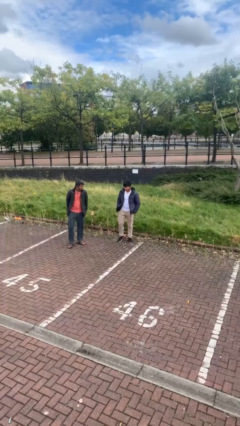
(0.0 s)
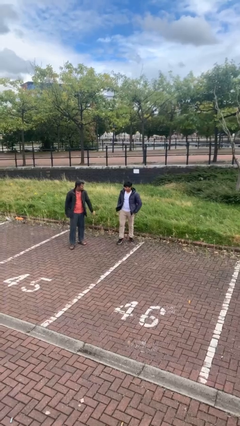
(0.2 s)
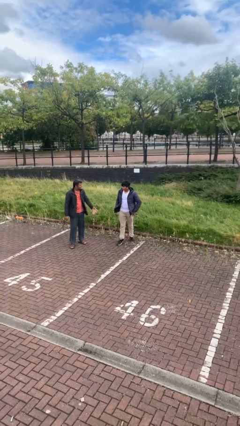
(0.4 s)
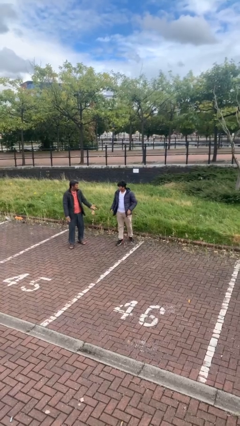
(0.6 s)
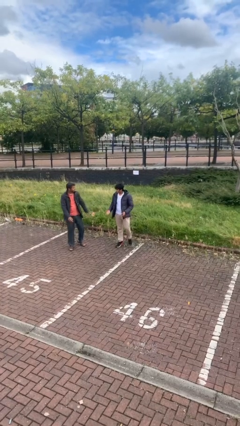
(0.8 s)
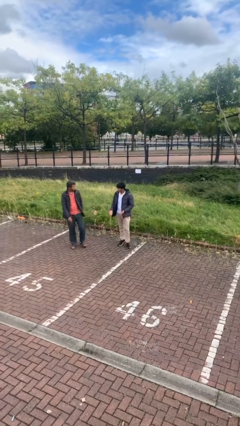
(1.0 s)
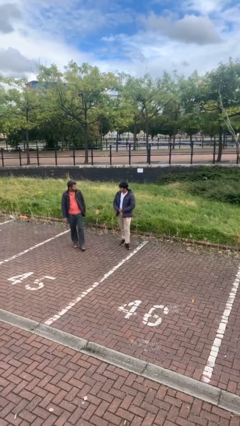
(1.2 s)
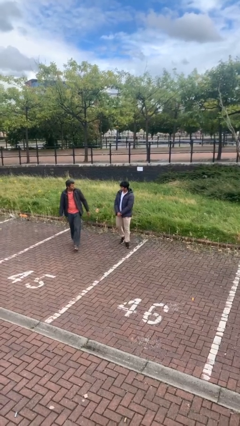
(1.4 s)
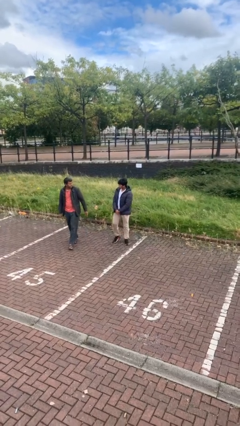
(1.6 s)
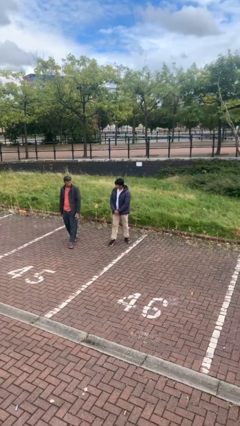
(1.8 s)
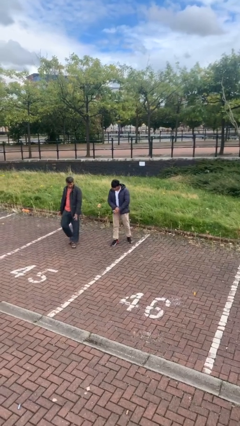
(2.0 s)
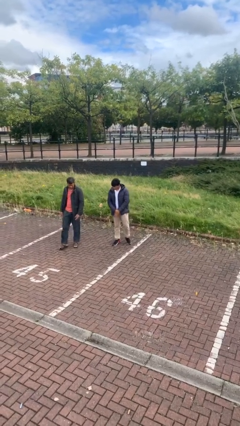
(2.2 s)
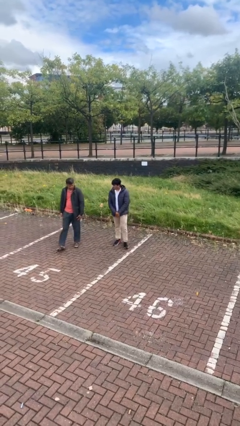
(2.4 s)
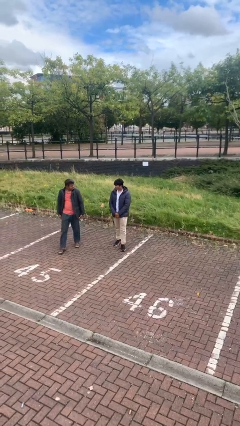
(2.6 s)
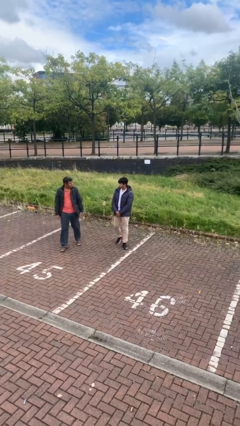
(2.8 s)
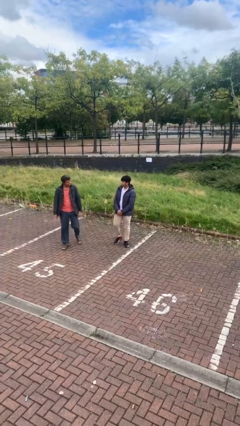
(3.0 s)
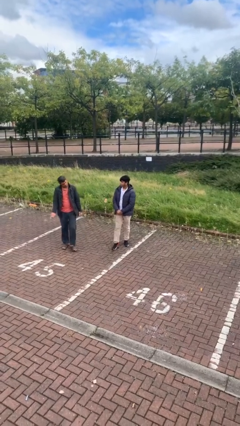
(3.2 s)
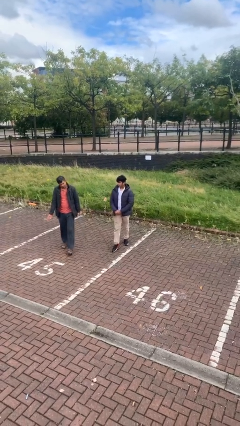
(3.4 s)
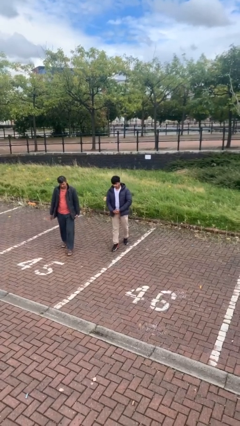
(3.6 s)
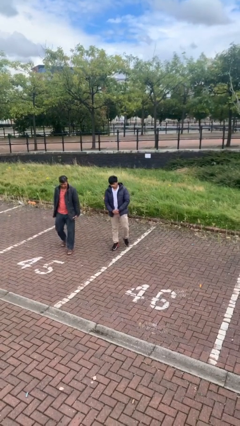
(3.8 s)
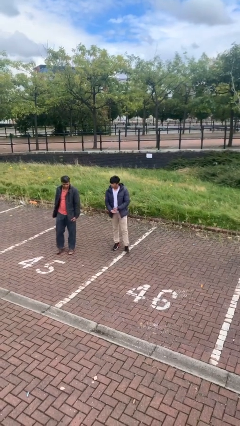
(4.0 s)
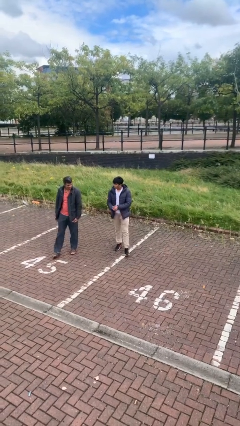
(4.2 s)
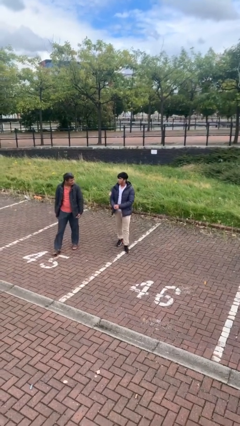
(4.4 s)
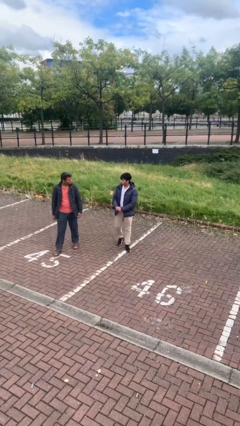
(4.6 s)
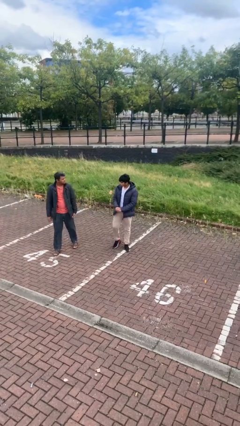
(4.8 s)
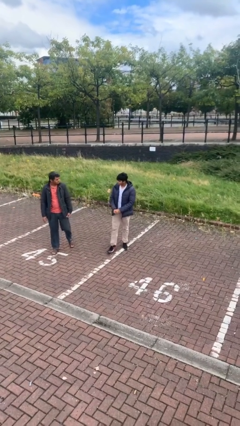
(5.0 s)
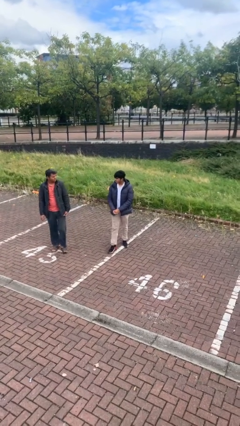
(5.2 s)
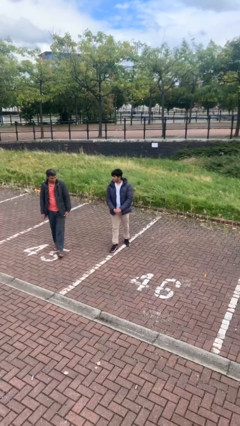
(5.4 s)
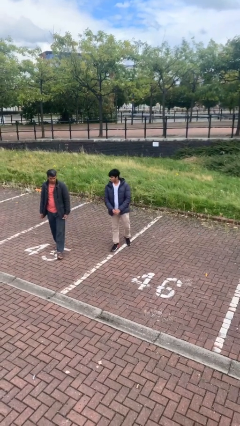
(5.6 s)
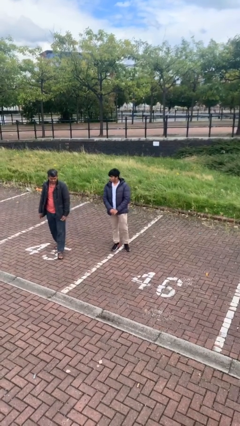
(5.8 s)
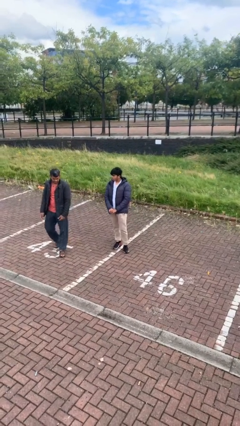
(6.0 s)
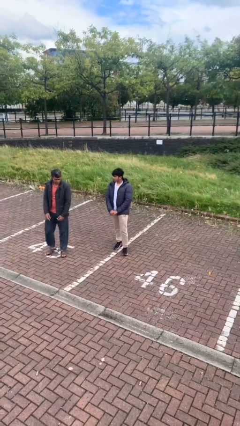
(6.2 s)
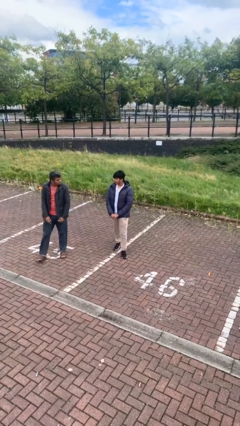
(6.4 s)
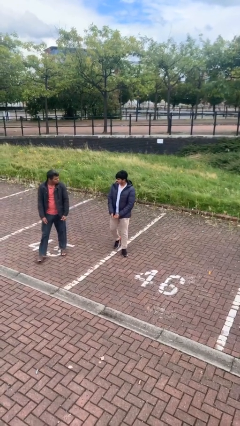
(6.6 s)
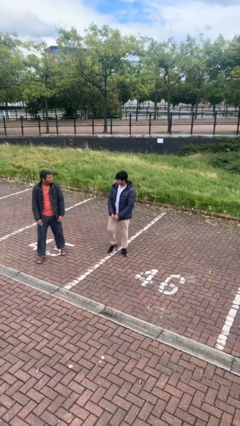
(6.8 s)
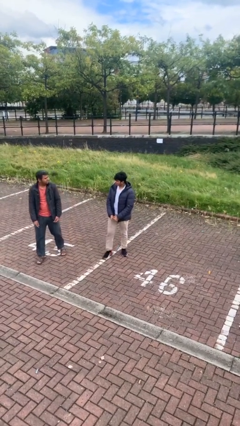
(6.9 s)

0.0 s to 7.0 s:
person talks to person

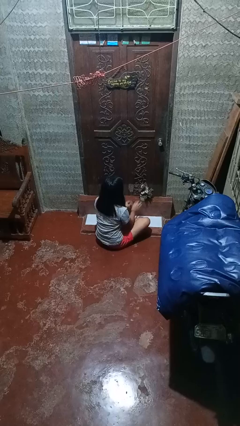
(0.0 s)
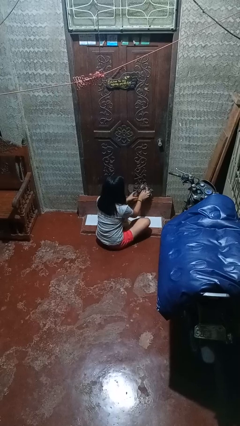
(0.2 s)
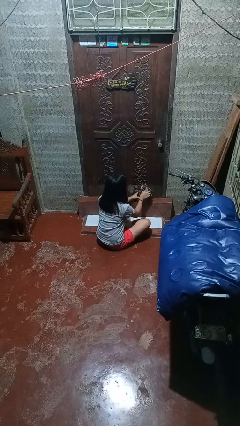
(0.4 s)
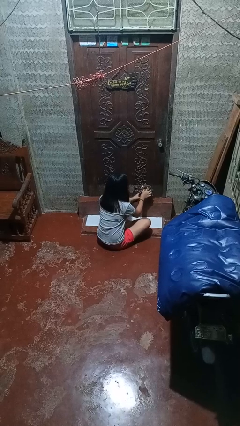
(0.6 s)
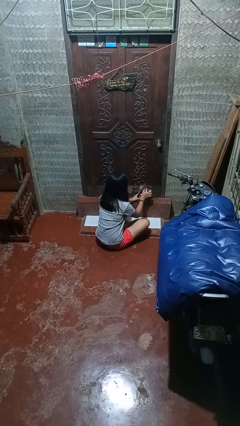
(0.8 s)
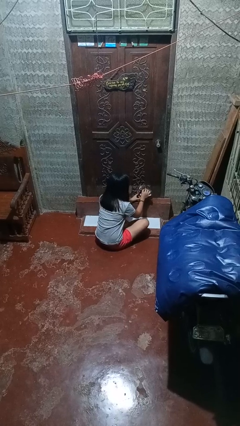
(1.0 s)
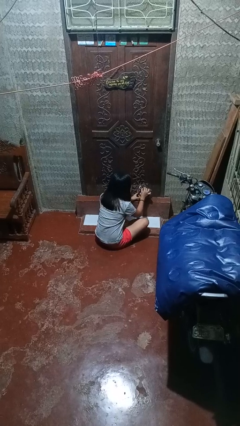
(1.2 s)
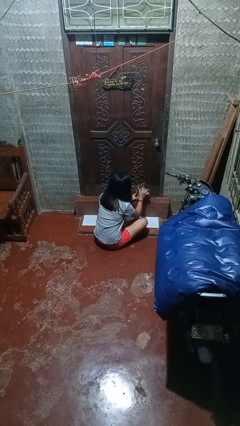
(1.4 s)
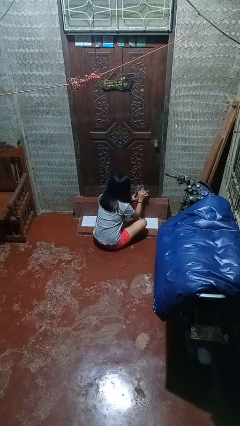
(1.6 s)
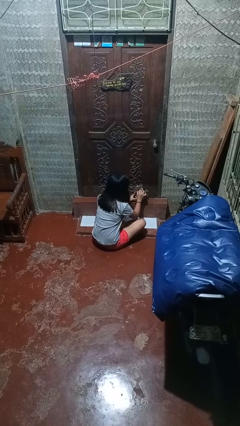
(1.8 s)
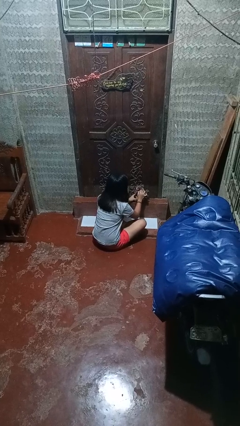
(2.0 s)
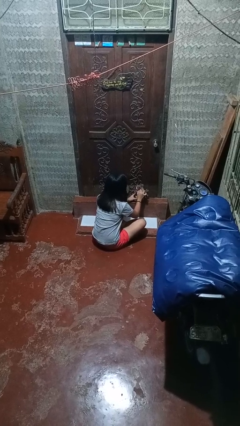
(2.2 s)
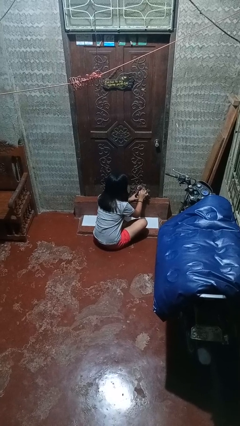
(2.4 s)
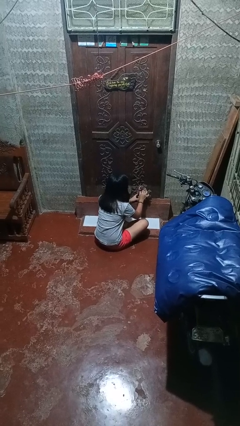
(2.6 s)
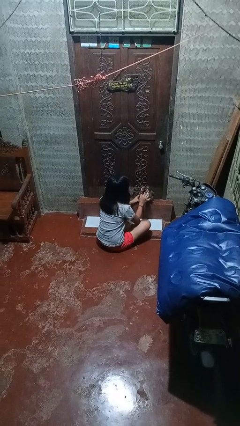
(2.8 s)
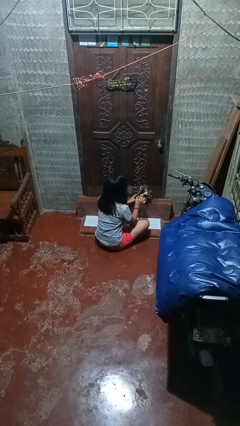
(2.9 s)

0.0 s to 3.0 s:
person arranges flowers in vase

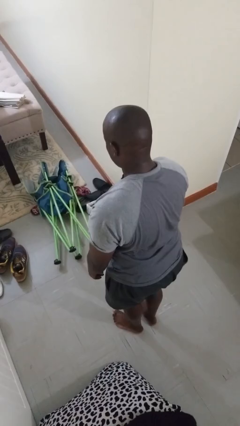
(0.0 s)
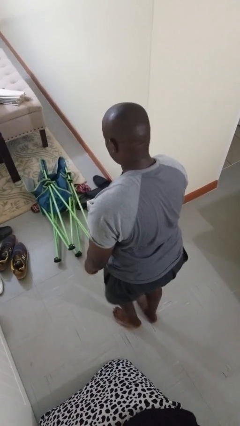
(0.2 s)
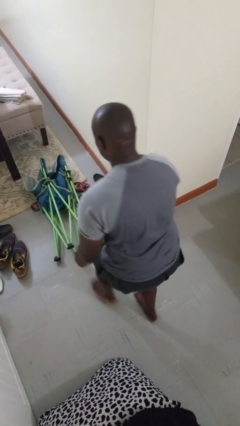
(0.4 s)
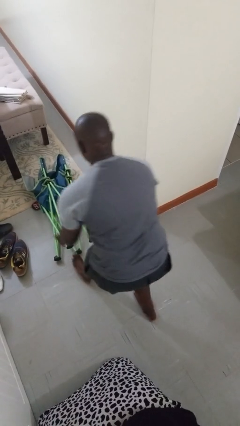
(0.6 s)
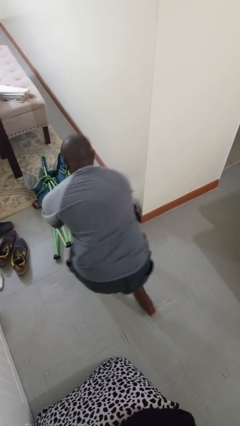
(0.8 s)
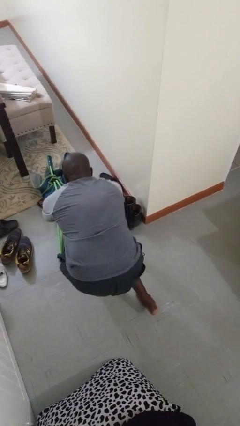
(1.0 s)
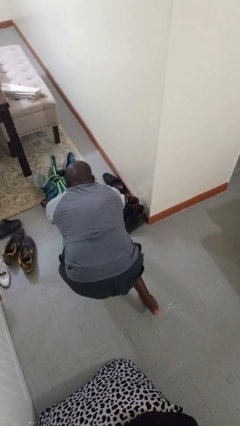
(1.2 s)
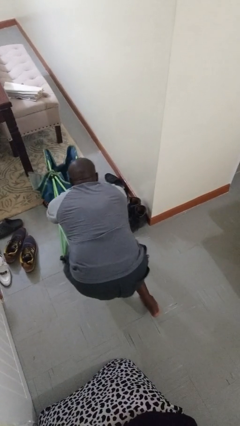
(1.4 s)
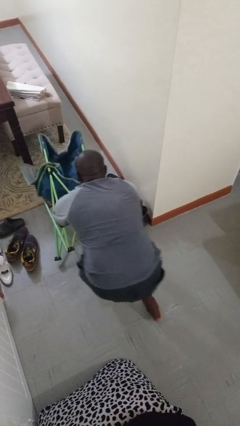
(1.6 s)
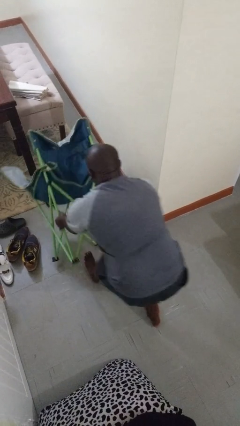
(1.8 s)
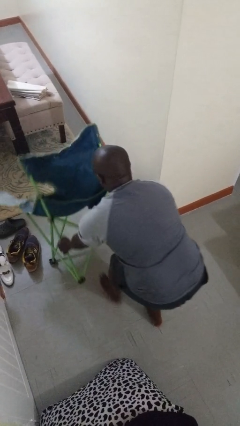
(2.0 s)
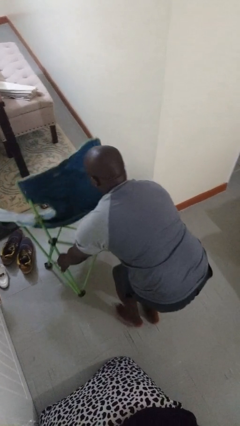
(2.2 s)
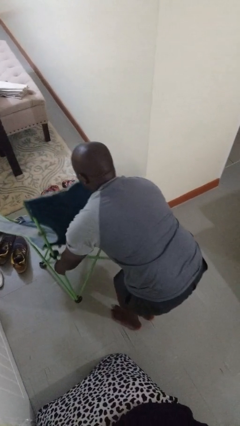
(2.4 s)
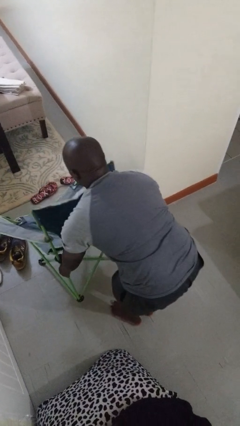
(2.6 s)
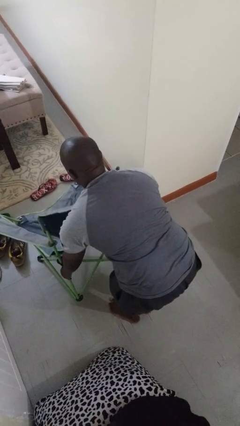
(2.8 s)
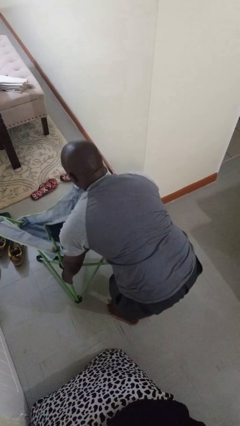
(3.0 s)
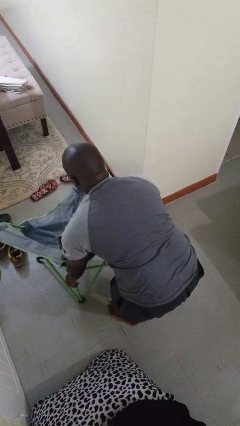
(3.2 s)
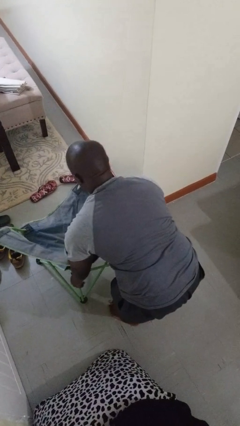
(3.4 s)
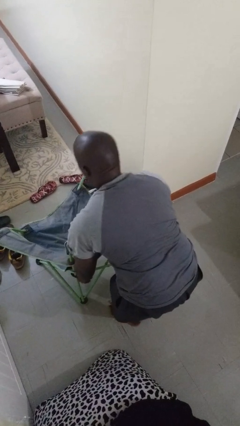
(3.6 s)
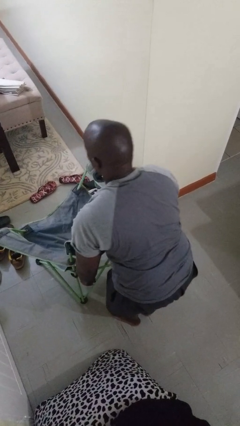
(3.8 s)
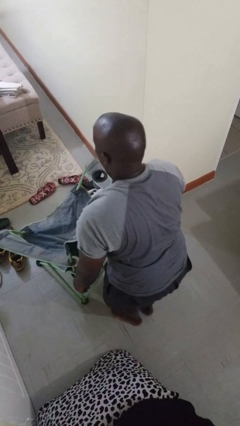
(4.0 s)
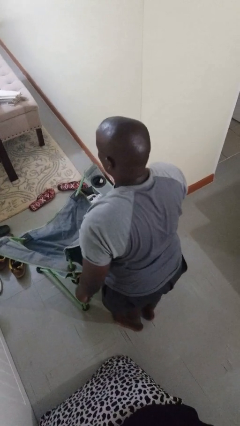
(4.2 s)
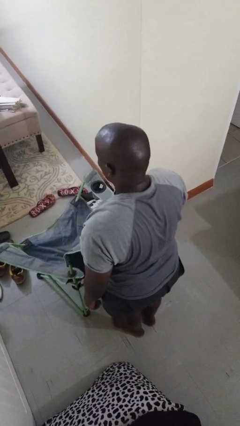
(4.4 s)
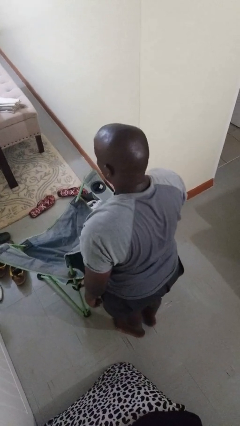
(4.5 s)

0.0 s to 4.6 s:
person sets upright furniture

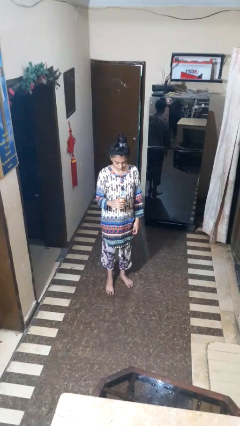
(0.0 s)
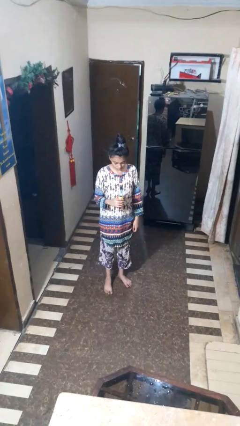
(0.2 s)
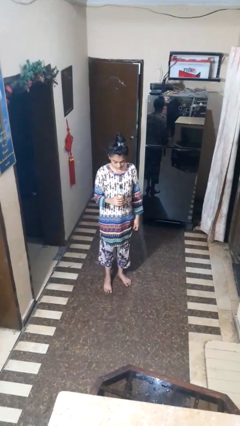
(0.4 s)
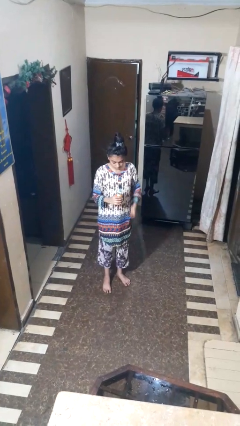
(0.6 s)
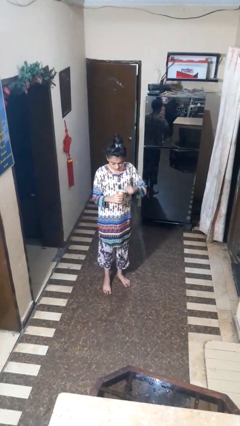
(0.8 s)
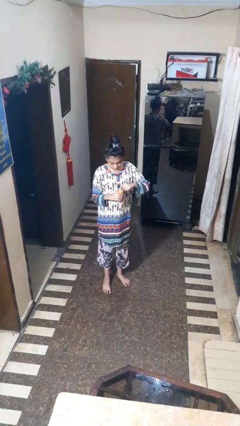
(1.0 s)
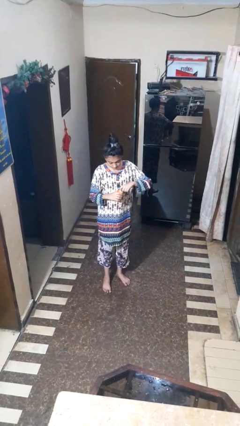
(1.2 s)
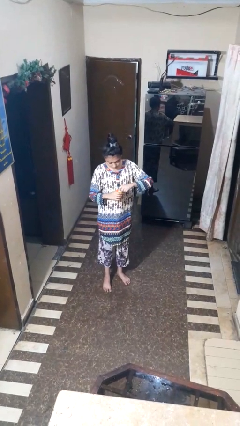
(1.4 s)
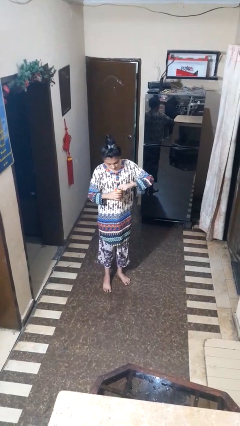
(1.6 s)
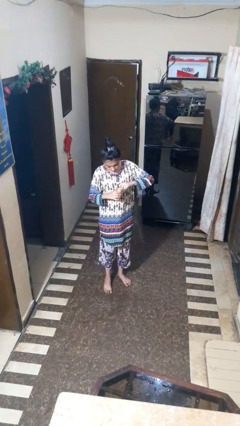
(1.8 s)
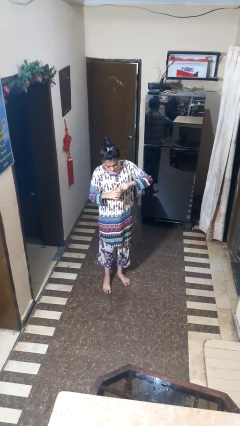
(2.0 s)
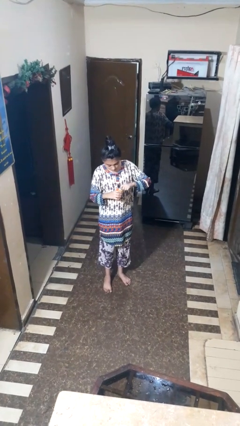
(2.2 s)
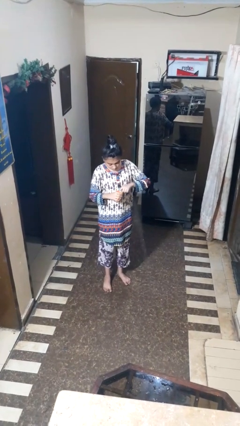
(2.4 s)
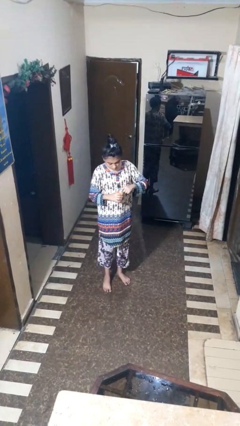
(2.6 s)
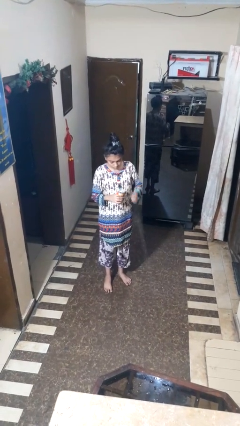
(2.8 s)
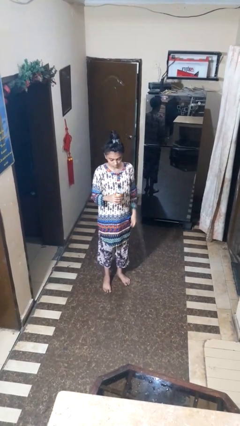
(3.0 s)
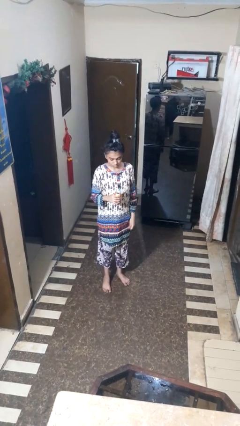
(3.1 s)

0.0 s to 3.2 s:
person opens beverage can
